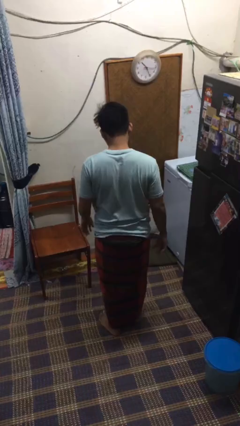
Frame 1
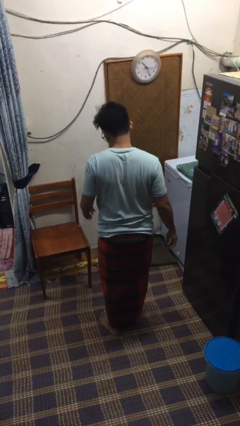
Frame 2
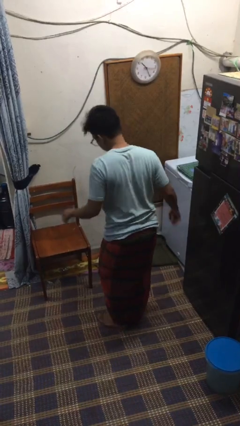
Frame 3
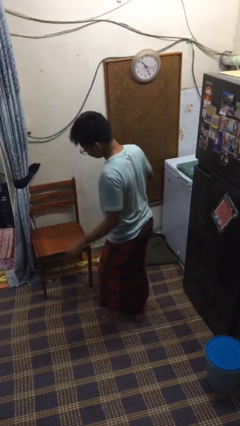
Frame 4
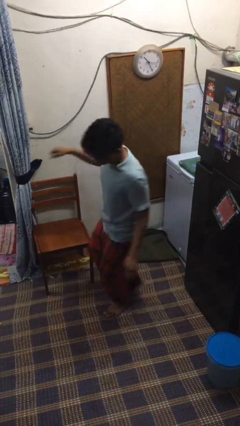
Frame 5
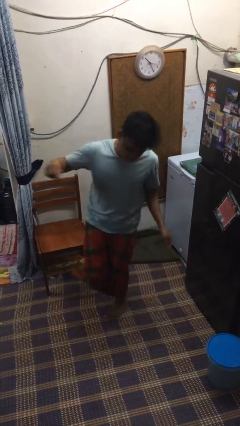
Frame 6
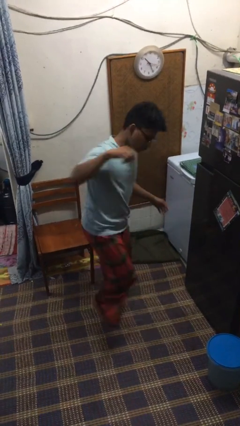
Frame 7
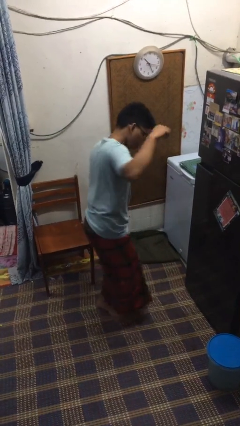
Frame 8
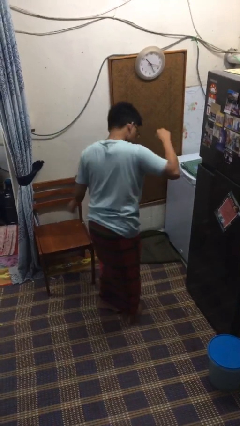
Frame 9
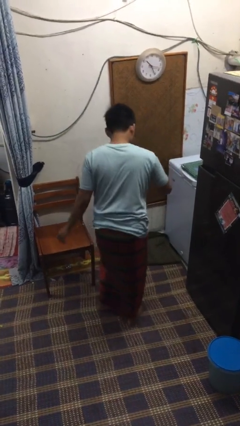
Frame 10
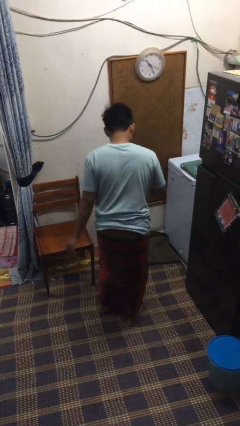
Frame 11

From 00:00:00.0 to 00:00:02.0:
person twirls

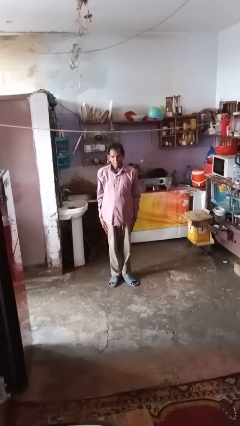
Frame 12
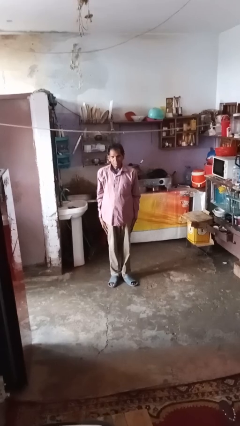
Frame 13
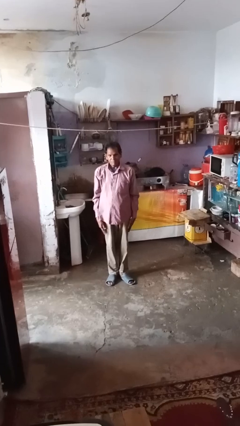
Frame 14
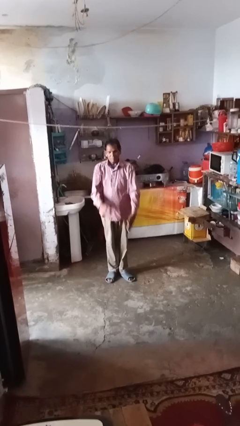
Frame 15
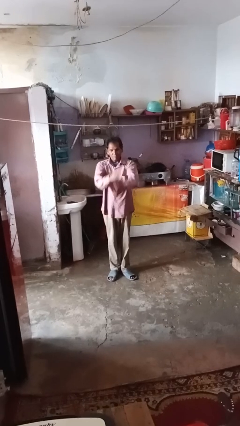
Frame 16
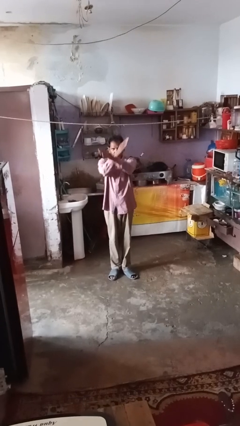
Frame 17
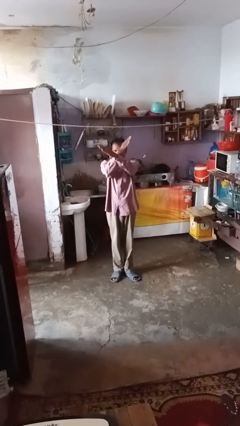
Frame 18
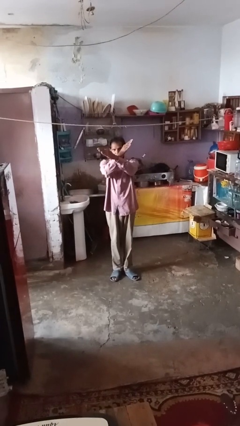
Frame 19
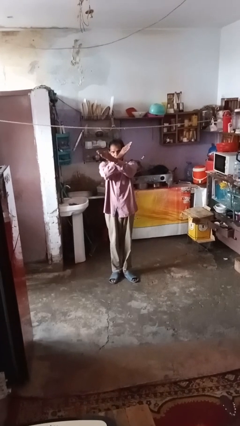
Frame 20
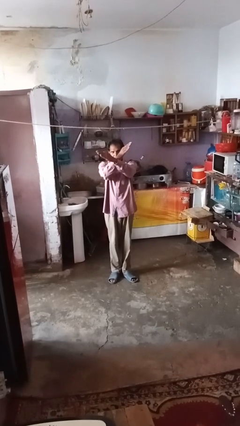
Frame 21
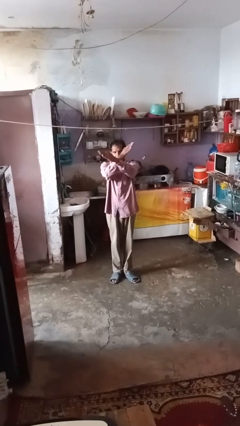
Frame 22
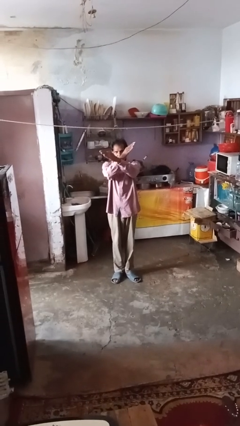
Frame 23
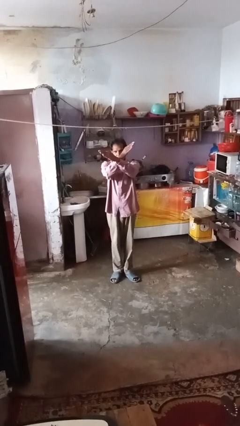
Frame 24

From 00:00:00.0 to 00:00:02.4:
person gestures arms x

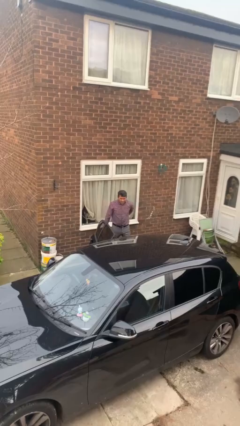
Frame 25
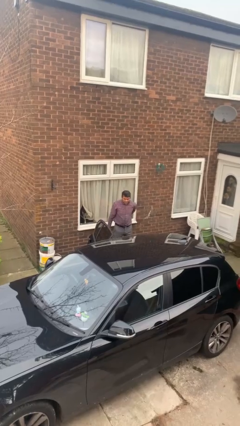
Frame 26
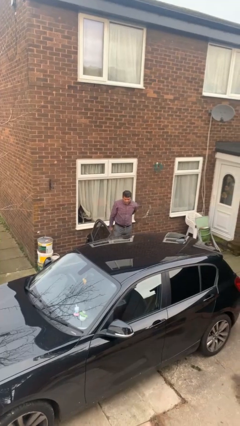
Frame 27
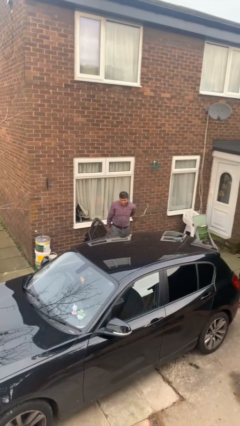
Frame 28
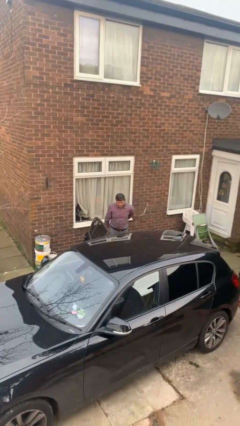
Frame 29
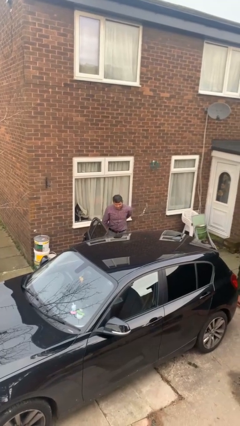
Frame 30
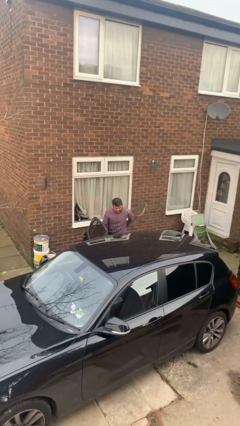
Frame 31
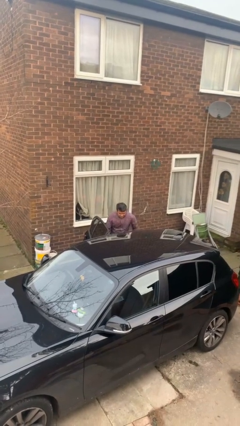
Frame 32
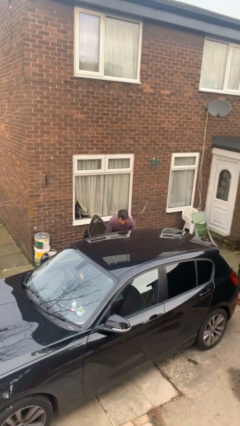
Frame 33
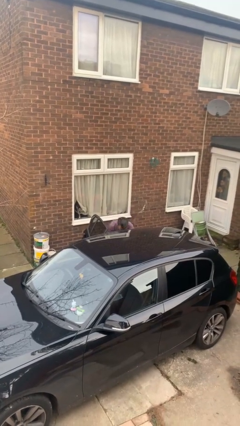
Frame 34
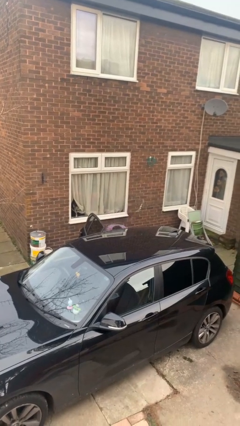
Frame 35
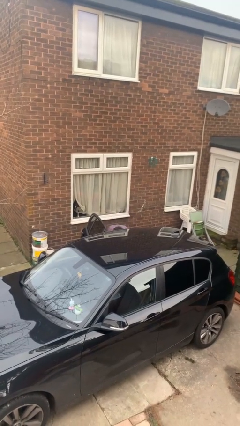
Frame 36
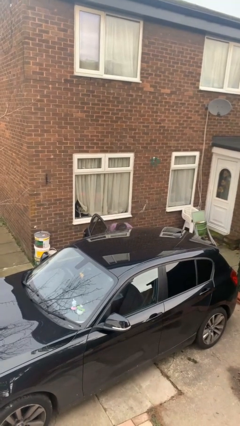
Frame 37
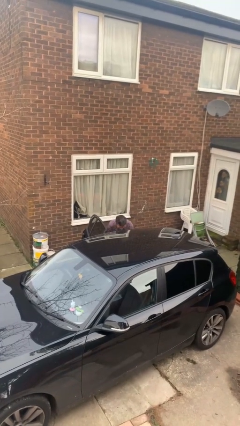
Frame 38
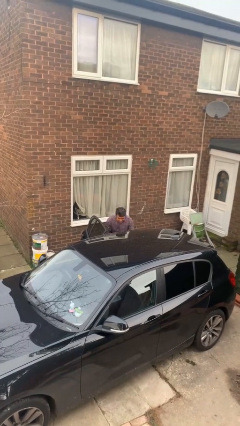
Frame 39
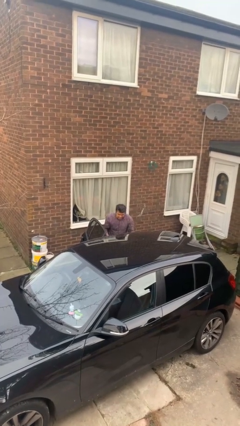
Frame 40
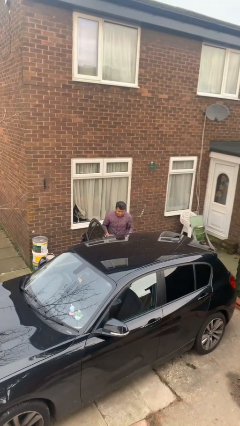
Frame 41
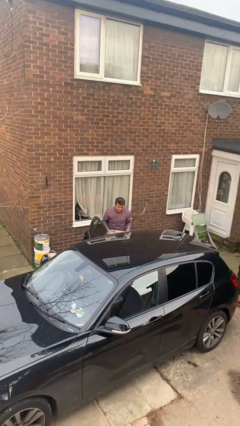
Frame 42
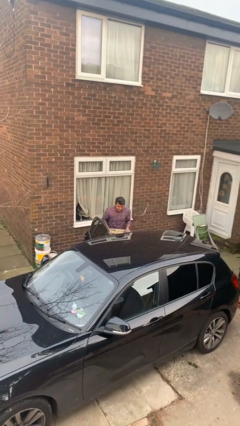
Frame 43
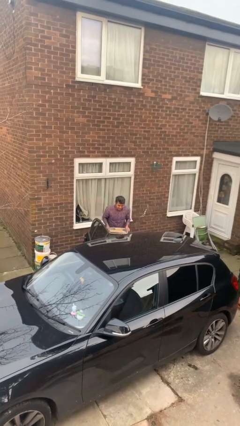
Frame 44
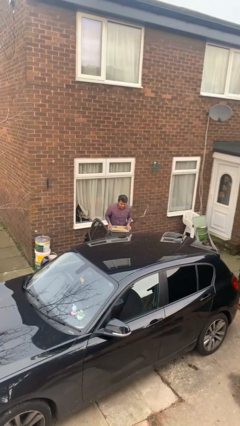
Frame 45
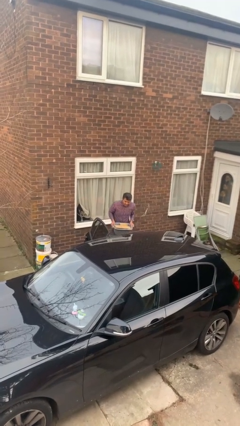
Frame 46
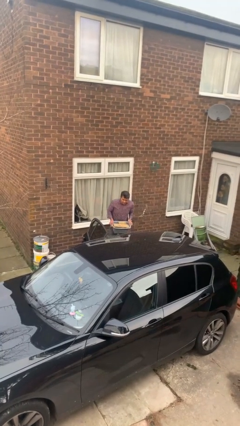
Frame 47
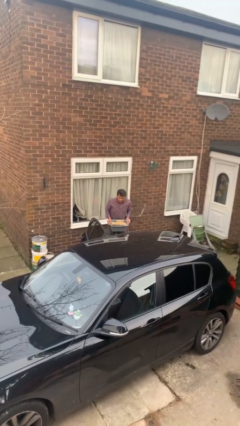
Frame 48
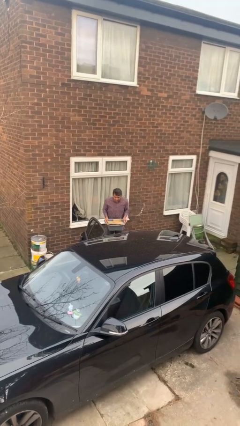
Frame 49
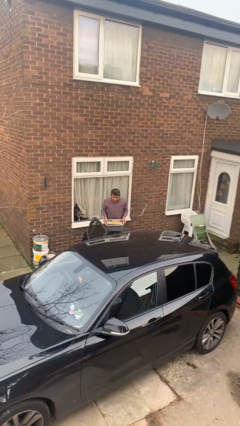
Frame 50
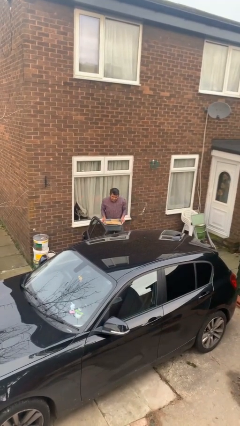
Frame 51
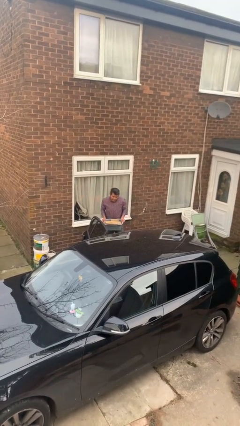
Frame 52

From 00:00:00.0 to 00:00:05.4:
person unloads car

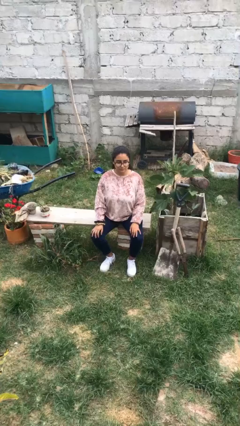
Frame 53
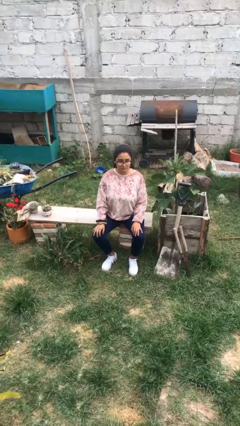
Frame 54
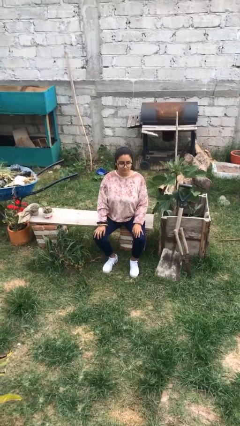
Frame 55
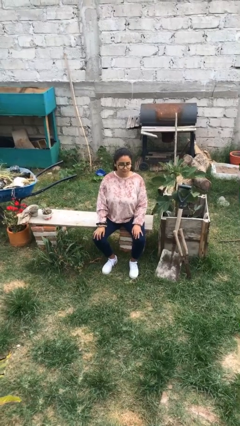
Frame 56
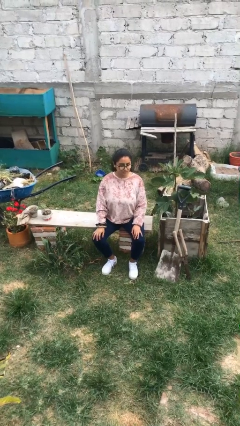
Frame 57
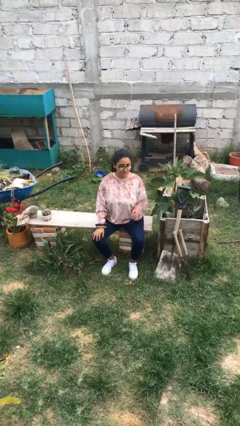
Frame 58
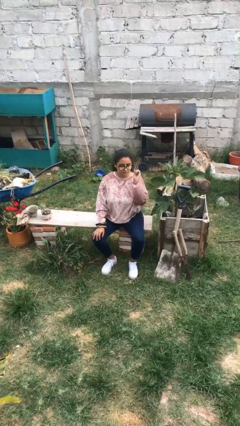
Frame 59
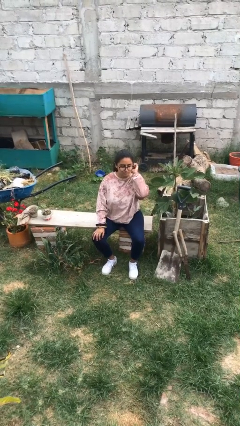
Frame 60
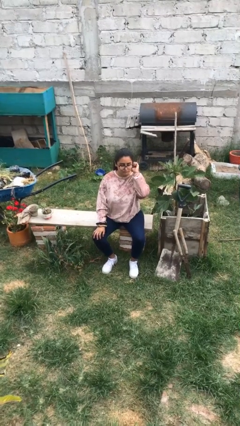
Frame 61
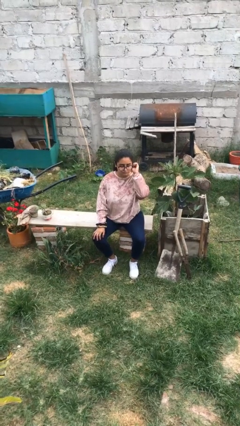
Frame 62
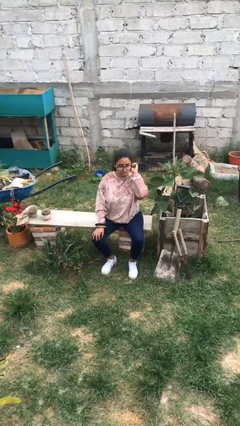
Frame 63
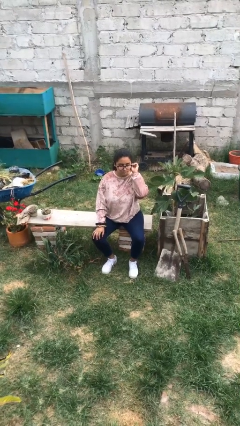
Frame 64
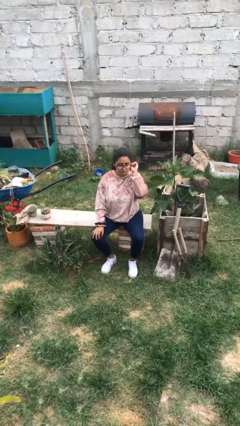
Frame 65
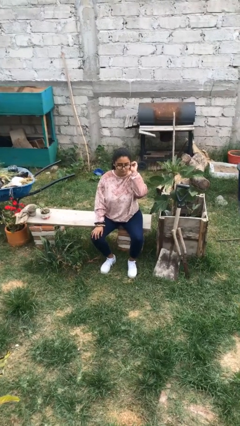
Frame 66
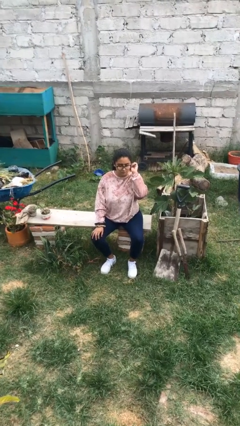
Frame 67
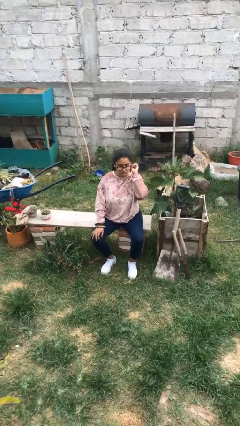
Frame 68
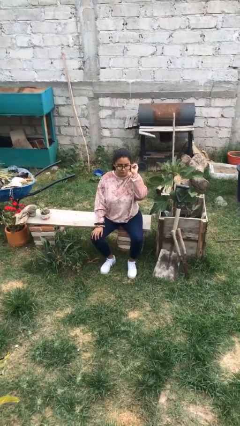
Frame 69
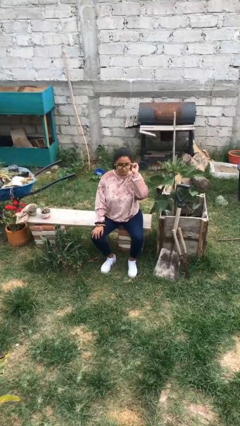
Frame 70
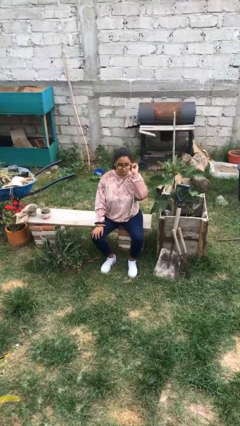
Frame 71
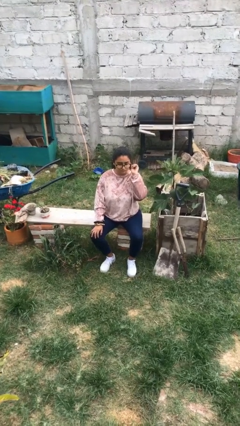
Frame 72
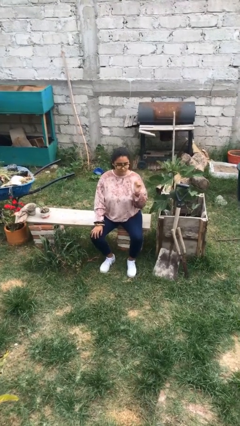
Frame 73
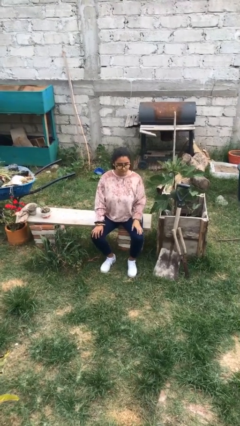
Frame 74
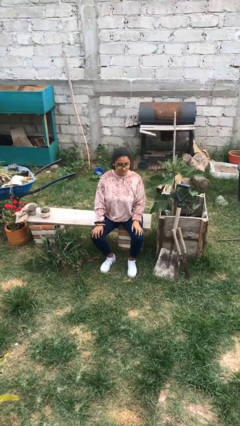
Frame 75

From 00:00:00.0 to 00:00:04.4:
person touches earlobe

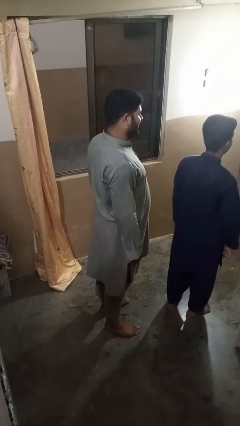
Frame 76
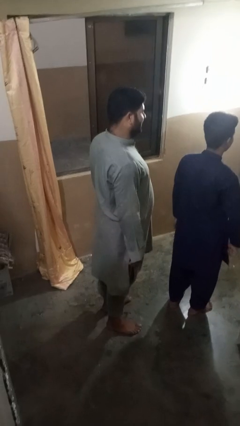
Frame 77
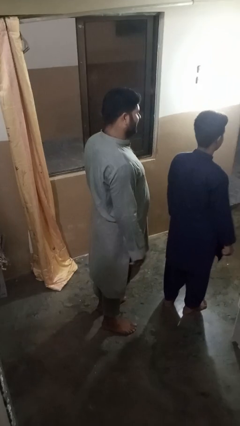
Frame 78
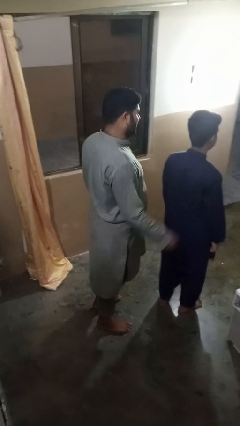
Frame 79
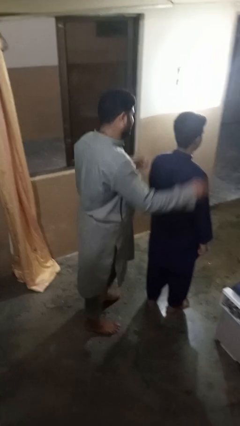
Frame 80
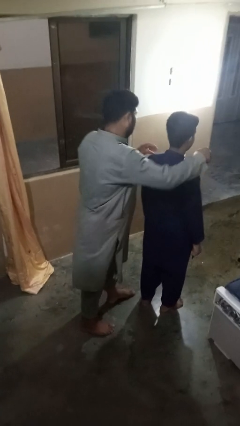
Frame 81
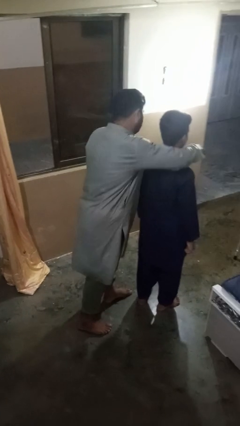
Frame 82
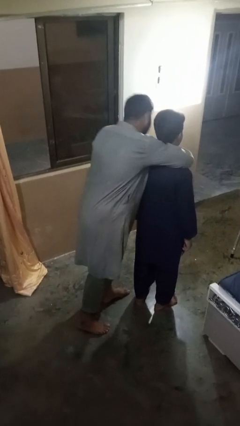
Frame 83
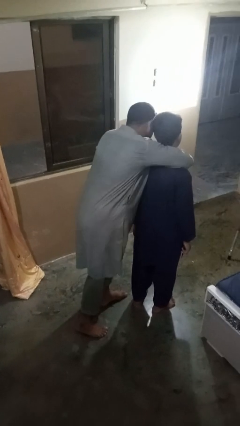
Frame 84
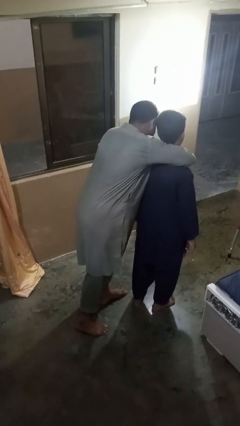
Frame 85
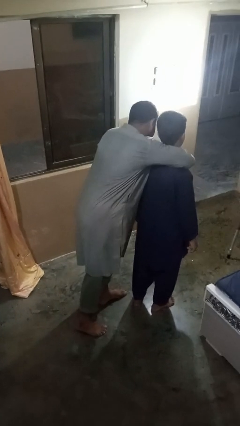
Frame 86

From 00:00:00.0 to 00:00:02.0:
person hugs person from behind

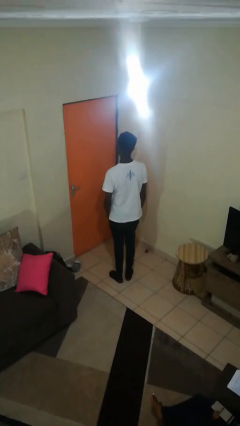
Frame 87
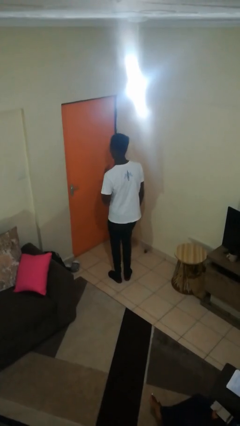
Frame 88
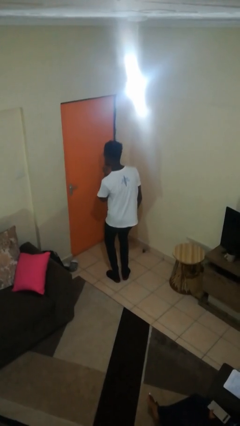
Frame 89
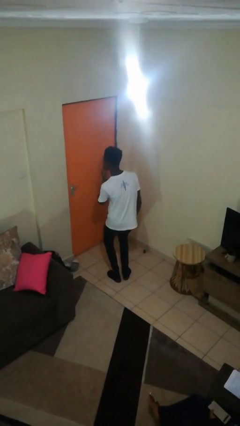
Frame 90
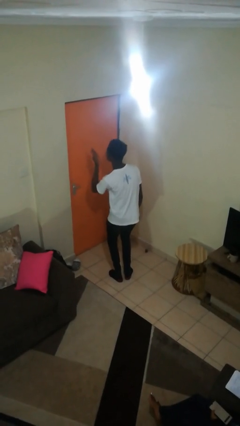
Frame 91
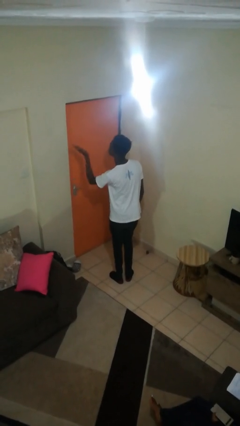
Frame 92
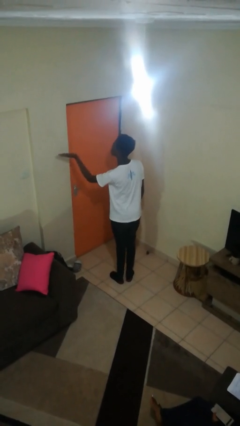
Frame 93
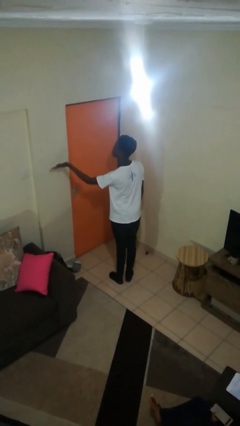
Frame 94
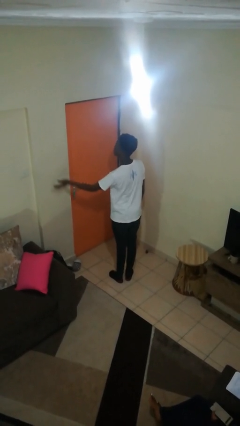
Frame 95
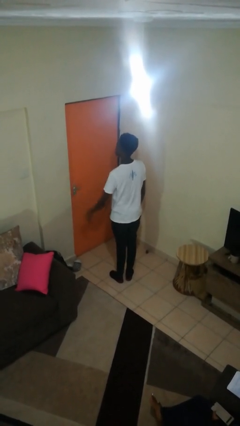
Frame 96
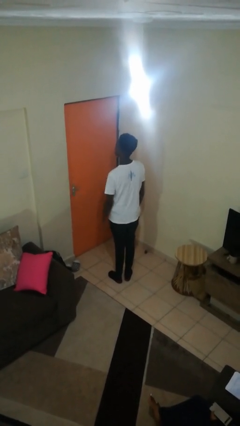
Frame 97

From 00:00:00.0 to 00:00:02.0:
person gestures blow kiss
